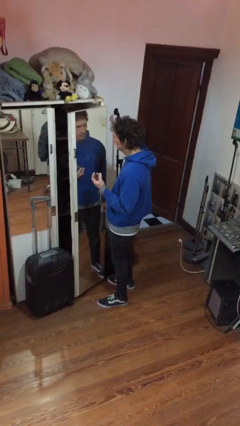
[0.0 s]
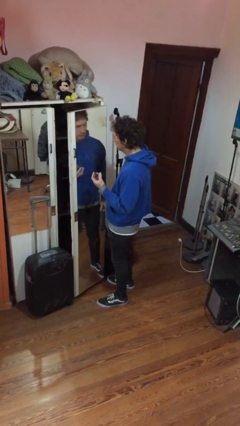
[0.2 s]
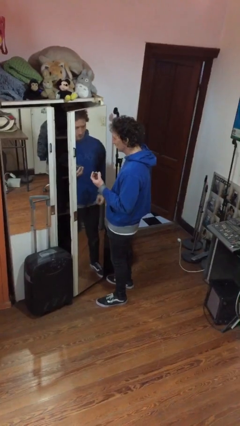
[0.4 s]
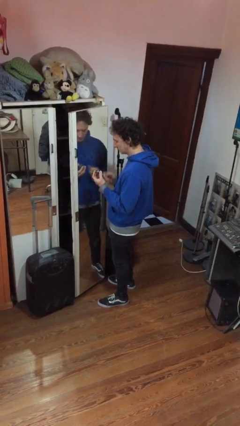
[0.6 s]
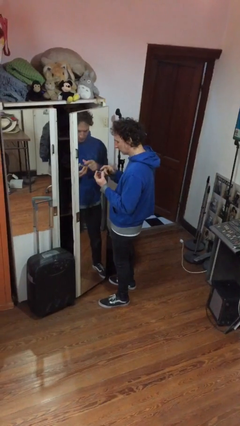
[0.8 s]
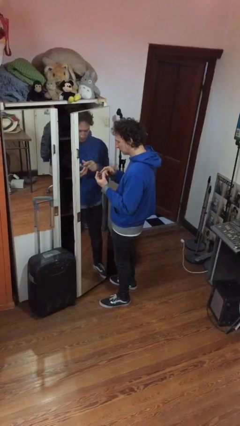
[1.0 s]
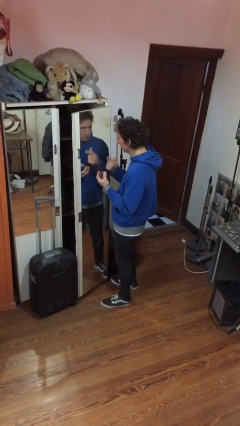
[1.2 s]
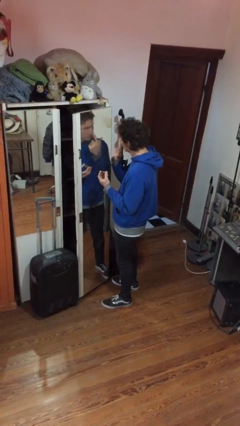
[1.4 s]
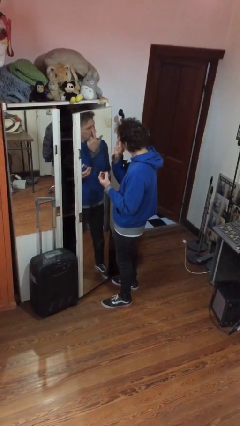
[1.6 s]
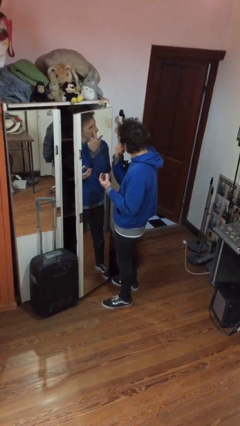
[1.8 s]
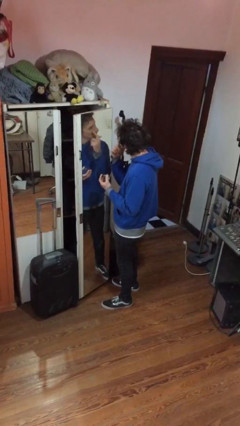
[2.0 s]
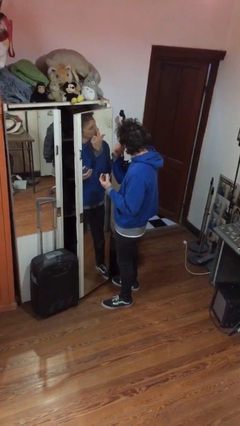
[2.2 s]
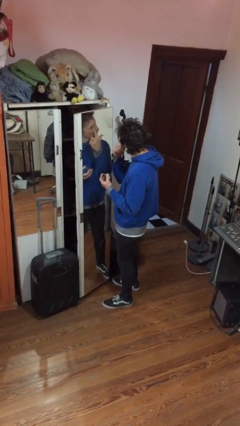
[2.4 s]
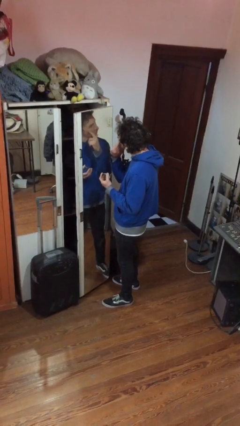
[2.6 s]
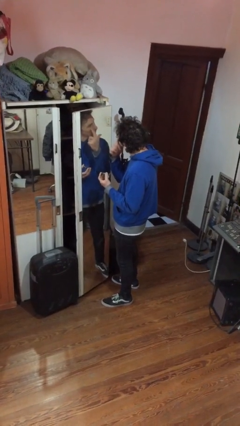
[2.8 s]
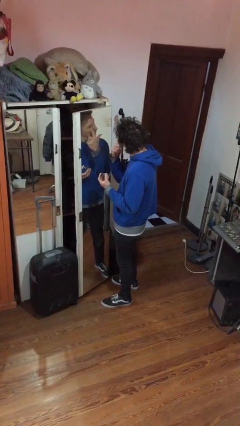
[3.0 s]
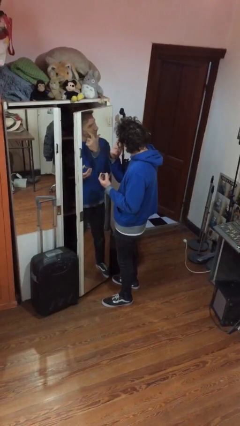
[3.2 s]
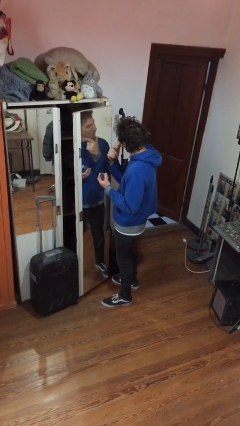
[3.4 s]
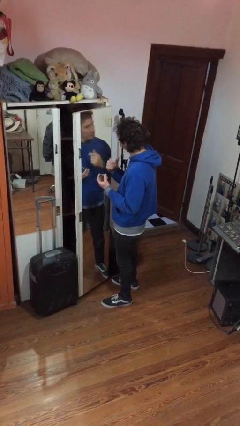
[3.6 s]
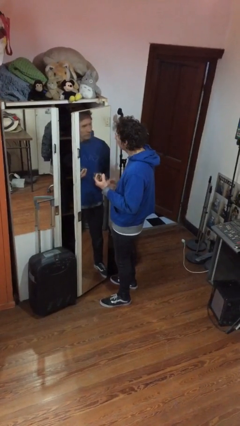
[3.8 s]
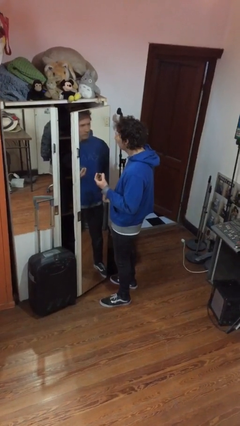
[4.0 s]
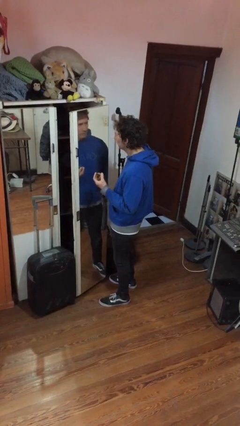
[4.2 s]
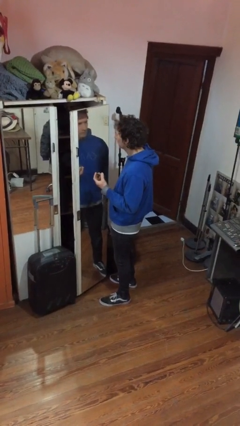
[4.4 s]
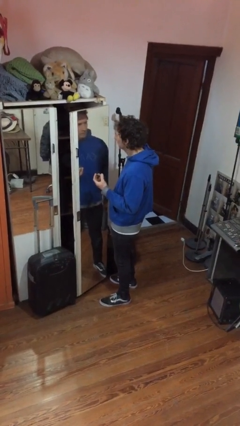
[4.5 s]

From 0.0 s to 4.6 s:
person applies eye makeup

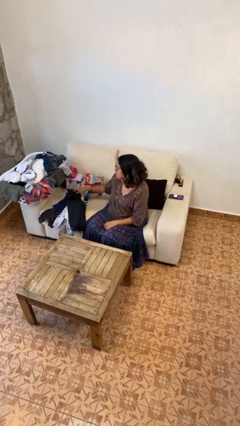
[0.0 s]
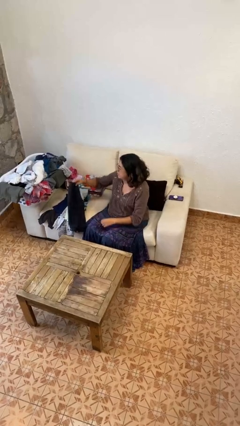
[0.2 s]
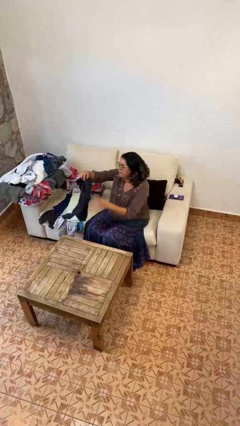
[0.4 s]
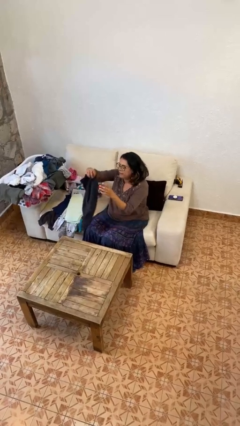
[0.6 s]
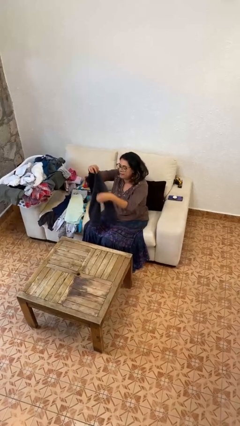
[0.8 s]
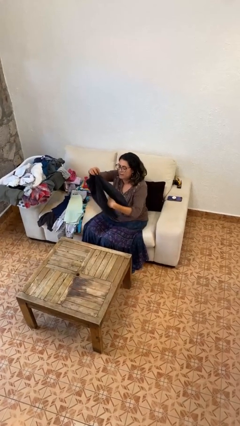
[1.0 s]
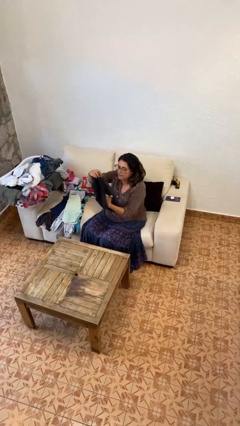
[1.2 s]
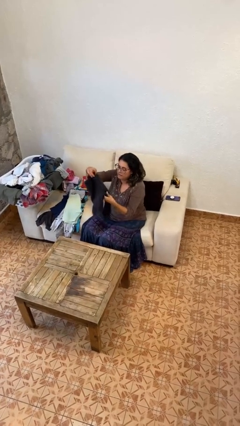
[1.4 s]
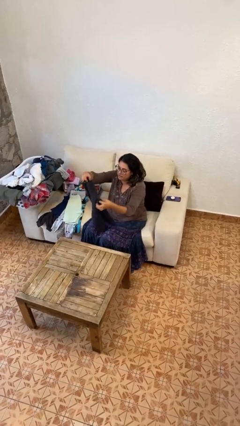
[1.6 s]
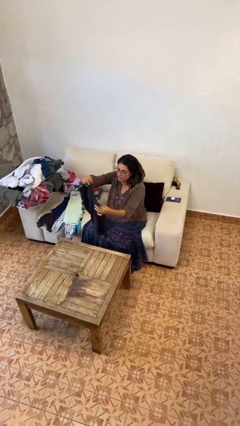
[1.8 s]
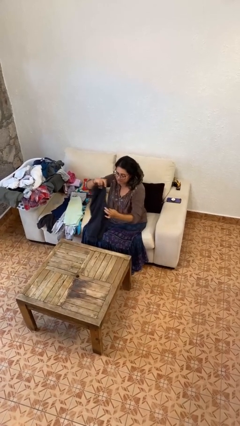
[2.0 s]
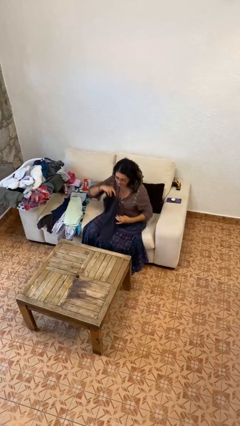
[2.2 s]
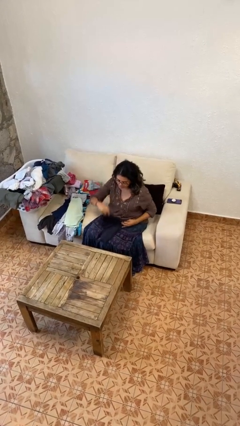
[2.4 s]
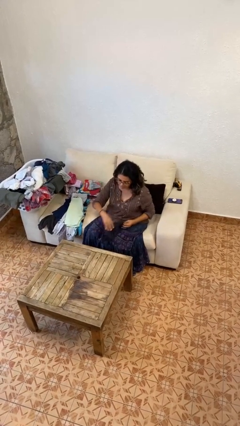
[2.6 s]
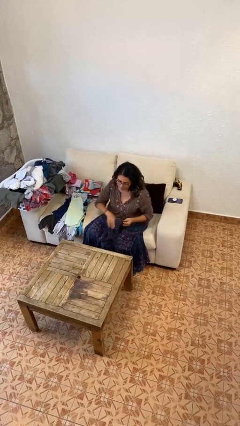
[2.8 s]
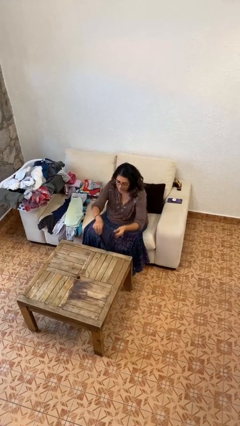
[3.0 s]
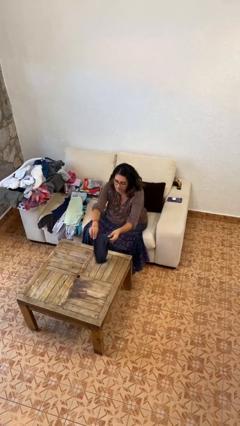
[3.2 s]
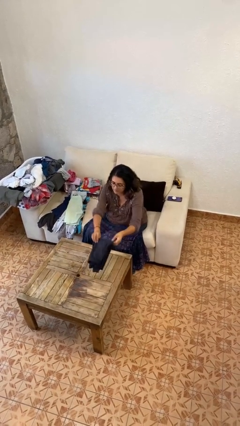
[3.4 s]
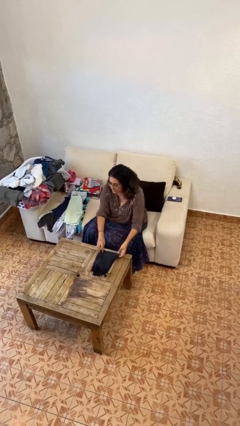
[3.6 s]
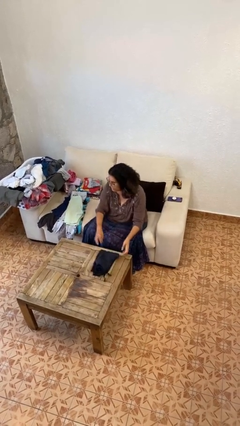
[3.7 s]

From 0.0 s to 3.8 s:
person folds pants

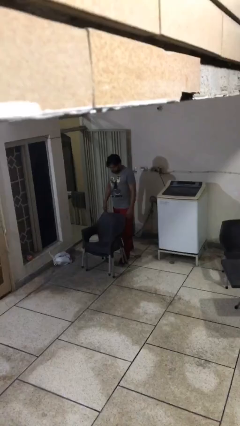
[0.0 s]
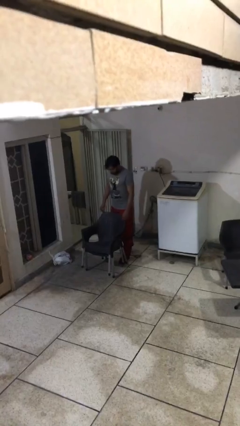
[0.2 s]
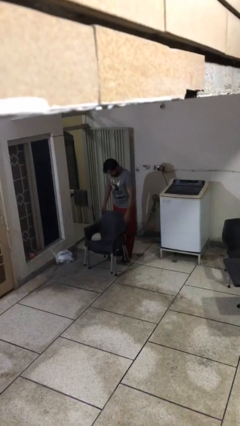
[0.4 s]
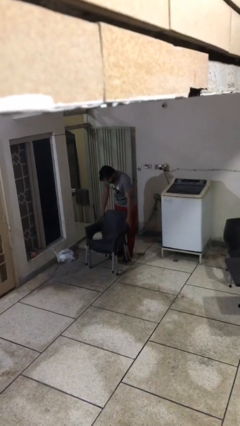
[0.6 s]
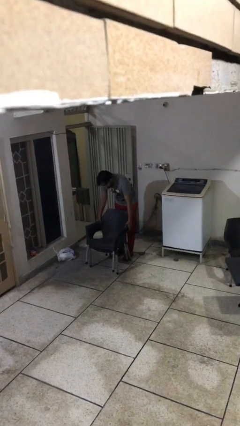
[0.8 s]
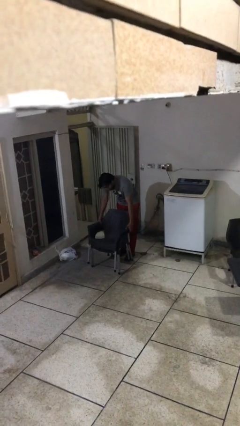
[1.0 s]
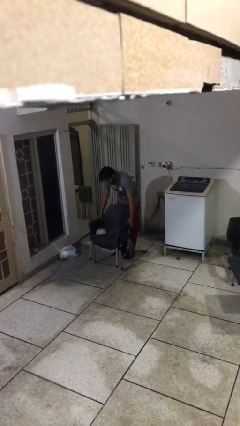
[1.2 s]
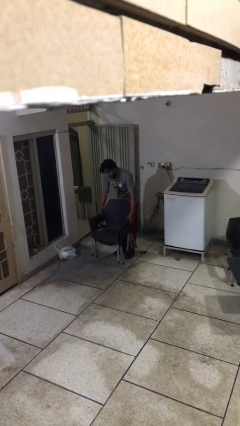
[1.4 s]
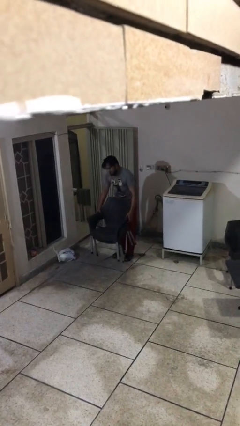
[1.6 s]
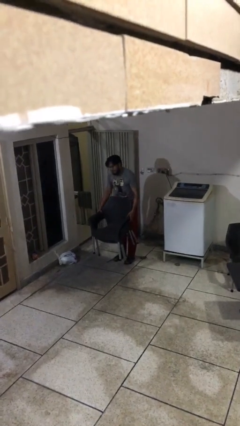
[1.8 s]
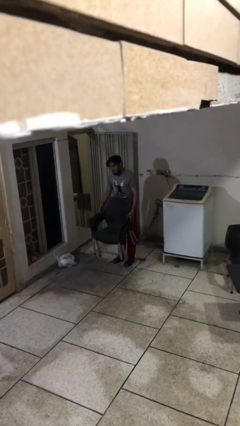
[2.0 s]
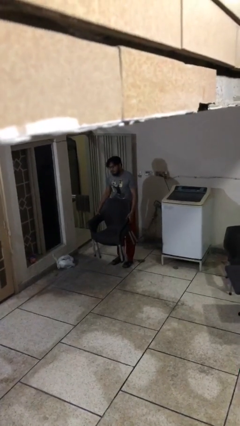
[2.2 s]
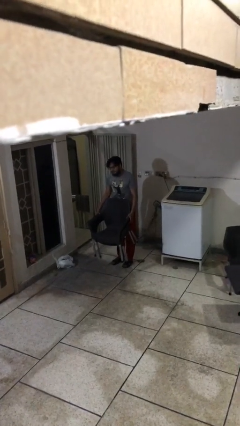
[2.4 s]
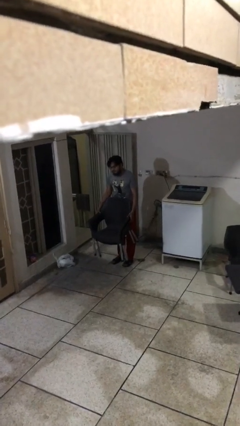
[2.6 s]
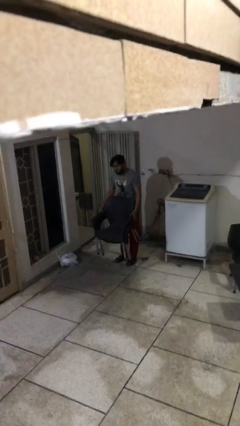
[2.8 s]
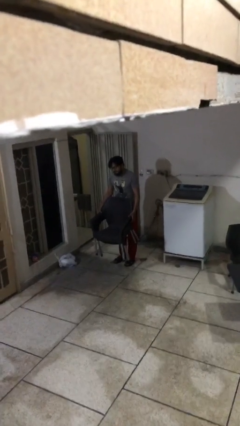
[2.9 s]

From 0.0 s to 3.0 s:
person picks up object from floor

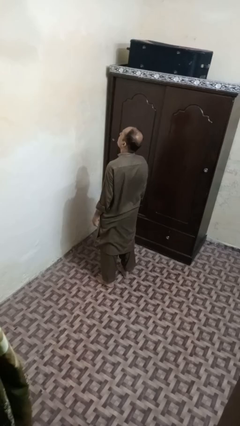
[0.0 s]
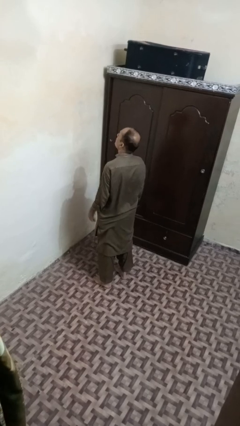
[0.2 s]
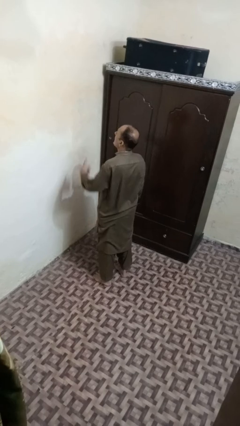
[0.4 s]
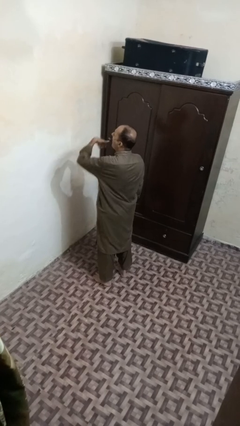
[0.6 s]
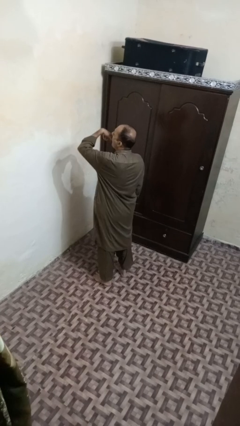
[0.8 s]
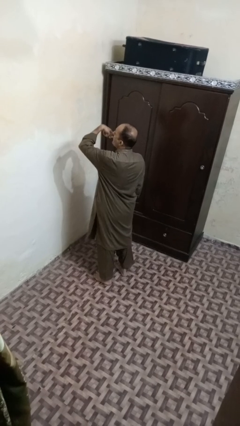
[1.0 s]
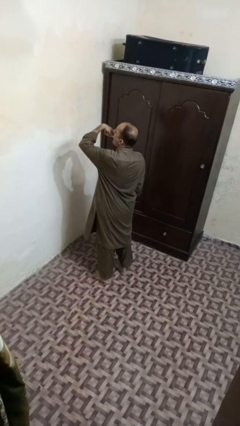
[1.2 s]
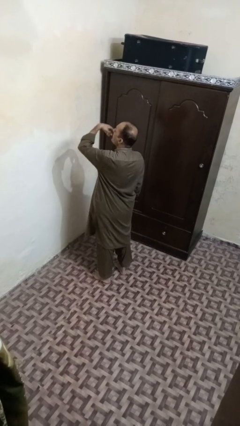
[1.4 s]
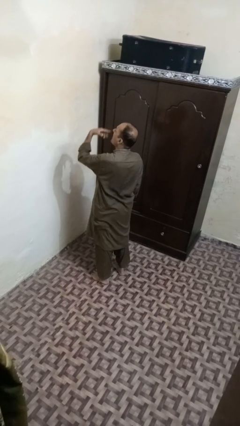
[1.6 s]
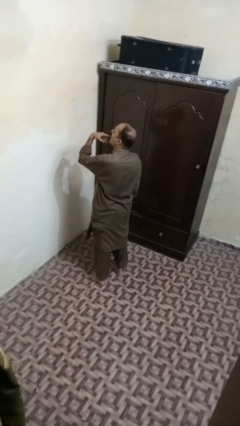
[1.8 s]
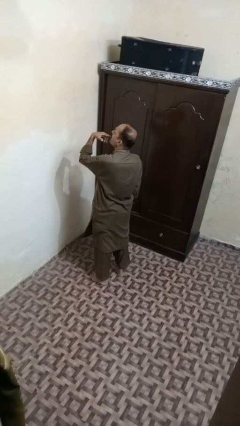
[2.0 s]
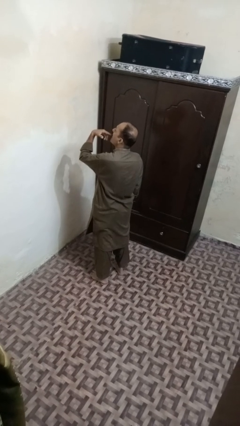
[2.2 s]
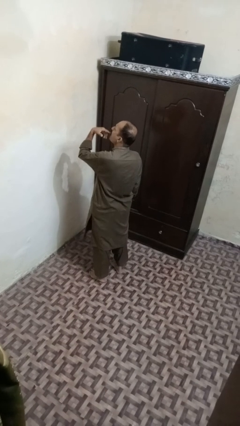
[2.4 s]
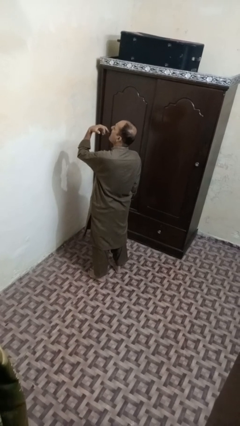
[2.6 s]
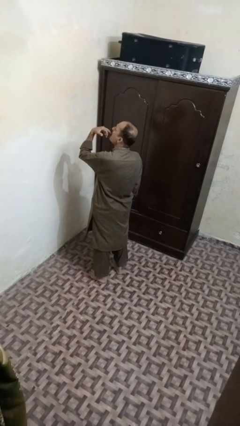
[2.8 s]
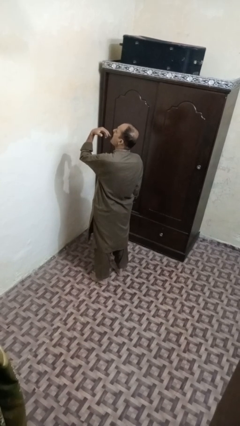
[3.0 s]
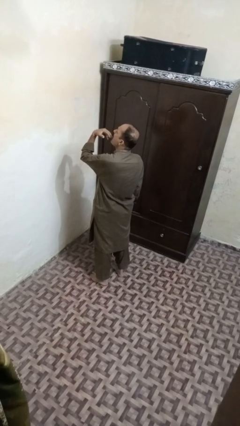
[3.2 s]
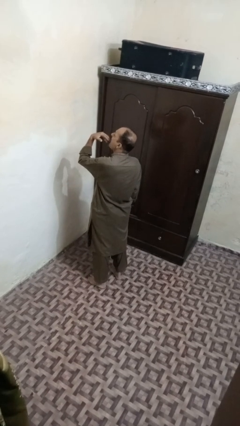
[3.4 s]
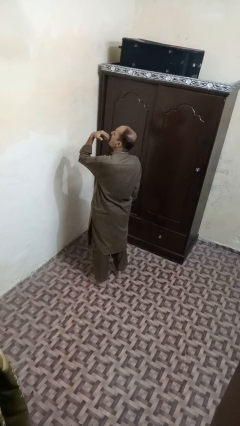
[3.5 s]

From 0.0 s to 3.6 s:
person licks fingers

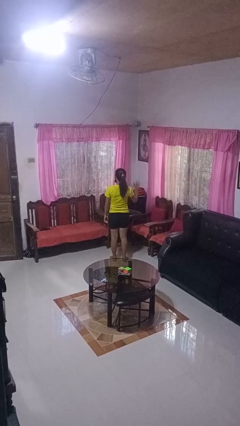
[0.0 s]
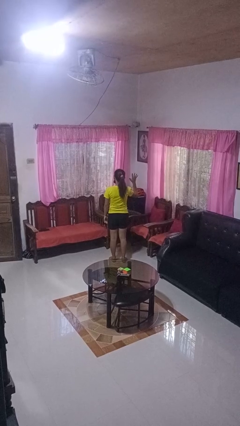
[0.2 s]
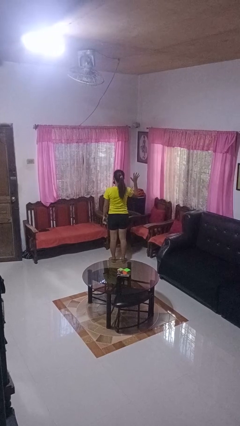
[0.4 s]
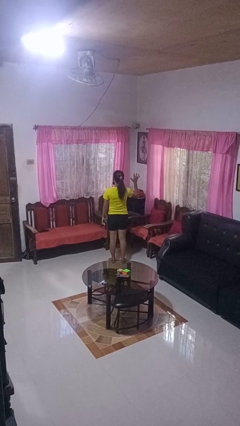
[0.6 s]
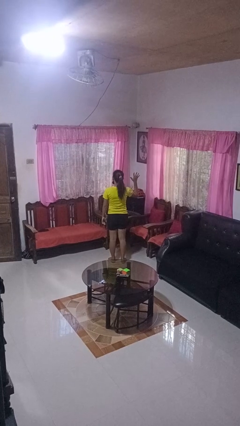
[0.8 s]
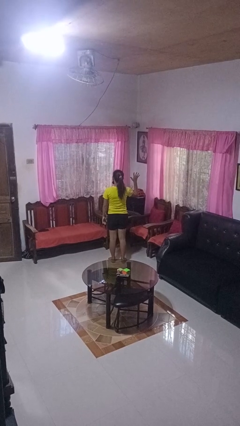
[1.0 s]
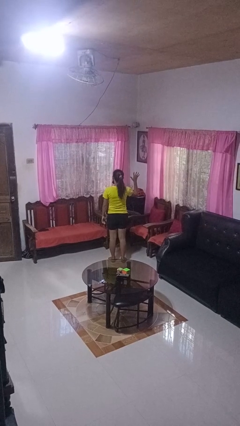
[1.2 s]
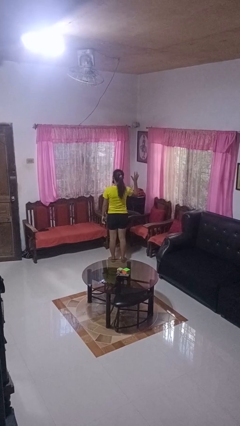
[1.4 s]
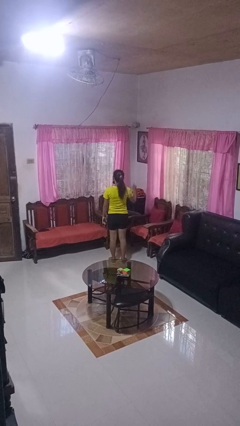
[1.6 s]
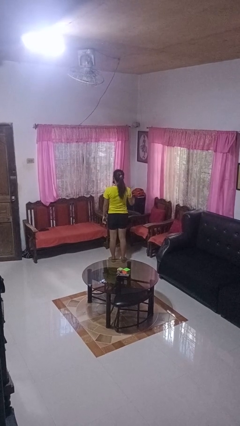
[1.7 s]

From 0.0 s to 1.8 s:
person gestures number five

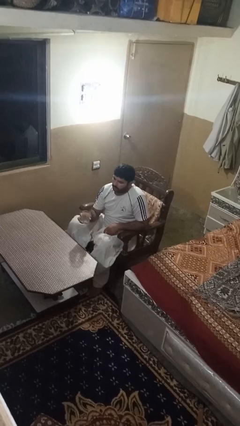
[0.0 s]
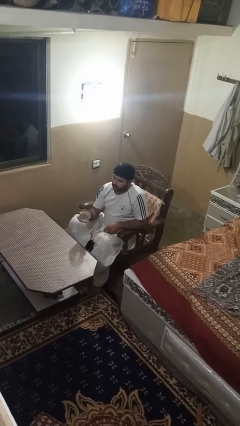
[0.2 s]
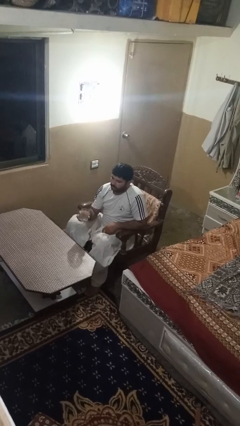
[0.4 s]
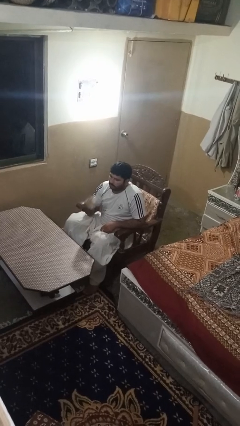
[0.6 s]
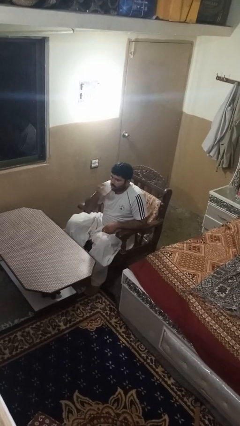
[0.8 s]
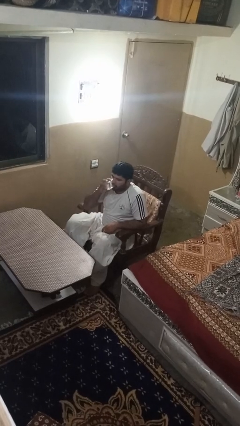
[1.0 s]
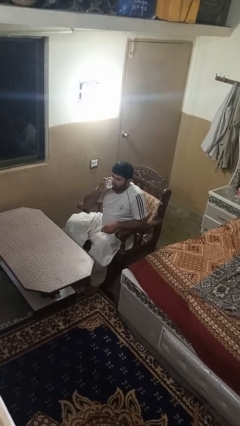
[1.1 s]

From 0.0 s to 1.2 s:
person drinks from shotglass
